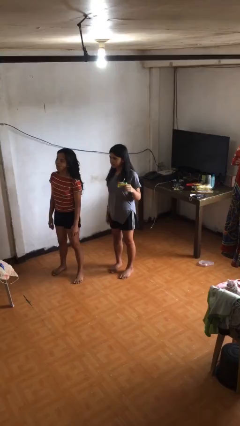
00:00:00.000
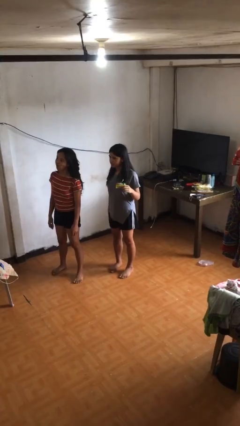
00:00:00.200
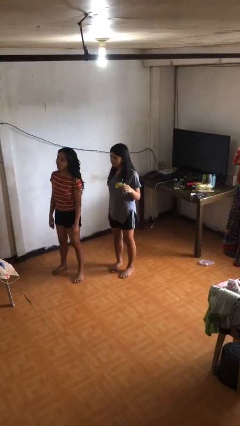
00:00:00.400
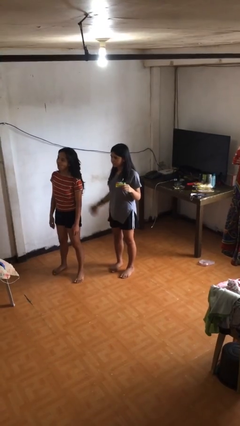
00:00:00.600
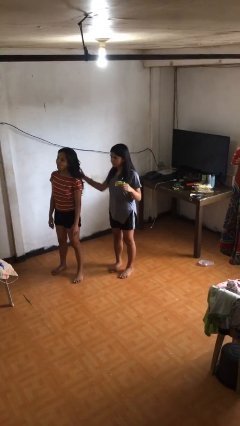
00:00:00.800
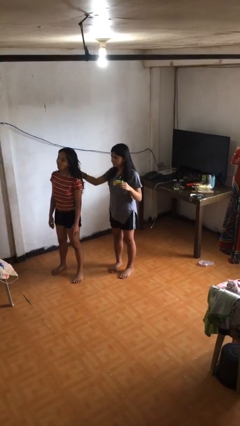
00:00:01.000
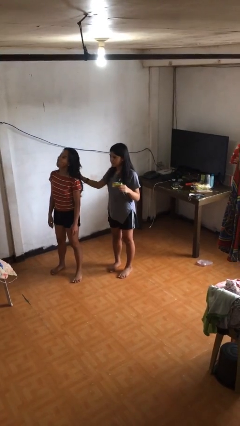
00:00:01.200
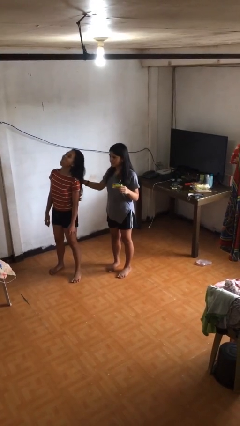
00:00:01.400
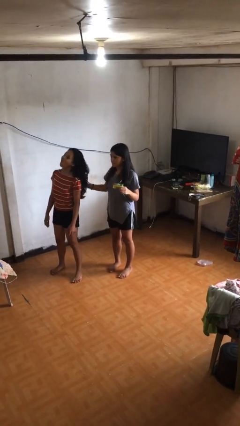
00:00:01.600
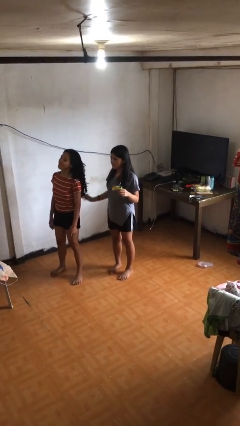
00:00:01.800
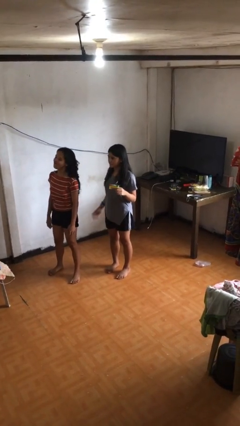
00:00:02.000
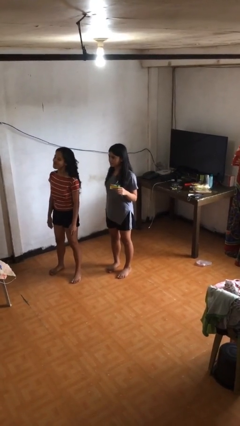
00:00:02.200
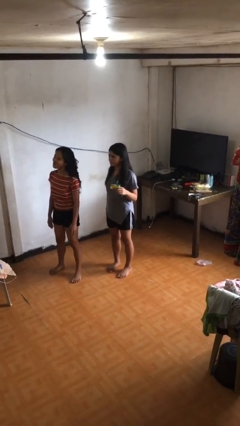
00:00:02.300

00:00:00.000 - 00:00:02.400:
person grabs person by hair

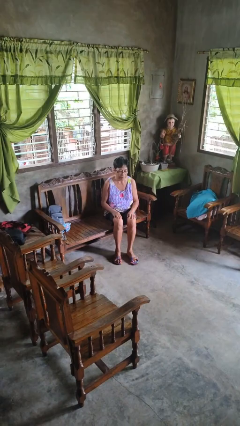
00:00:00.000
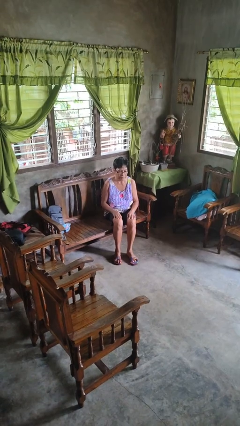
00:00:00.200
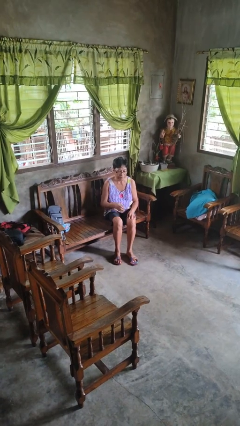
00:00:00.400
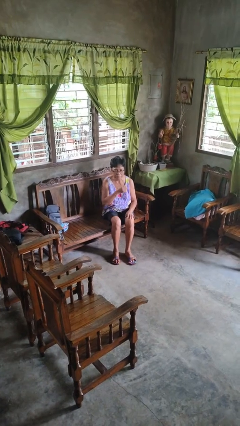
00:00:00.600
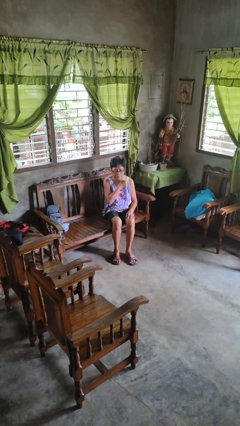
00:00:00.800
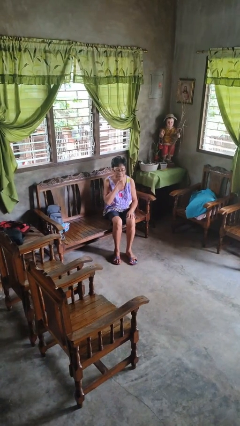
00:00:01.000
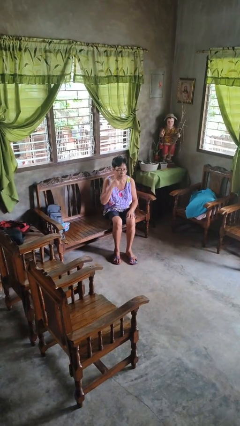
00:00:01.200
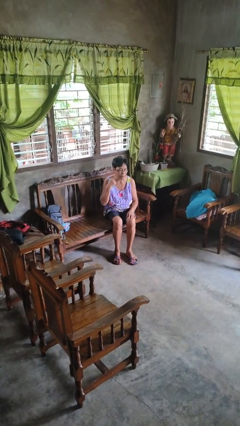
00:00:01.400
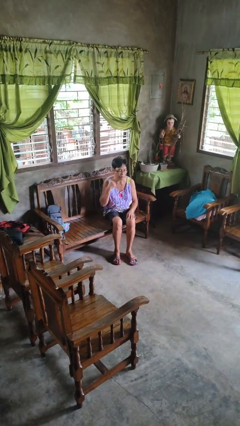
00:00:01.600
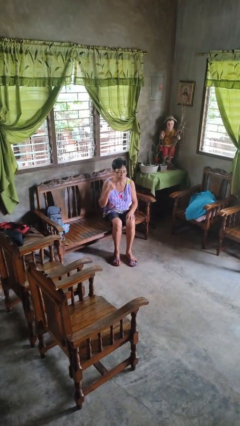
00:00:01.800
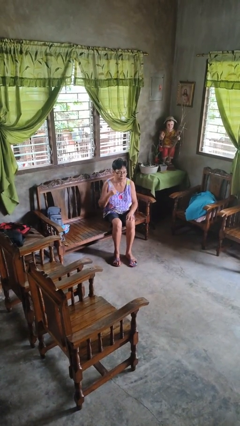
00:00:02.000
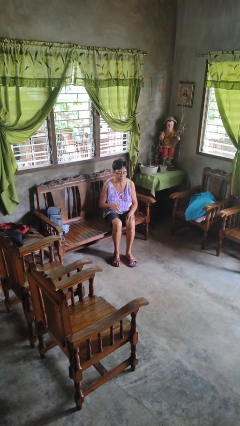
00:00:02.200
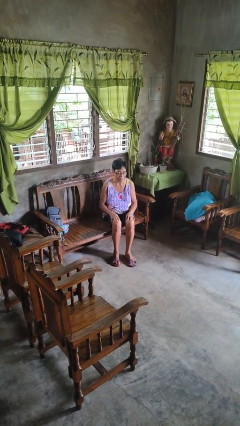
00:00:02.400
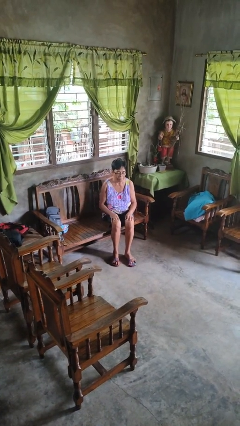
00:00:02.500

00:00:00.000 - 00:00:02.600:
person gestures cut

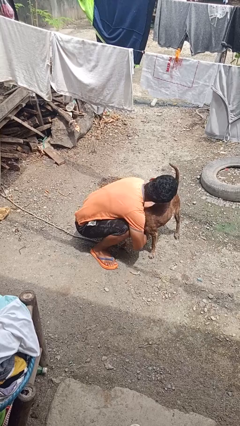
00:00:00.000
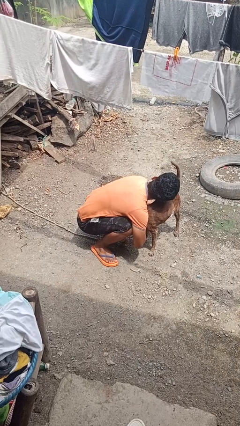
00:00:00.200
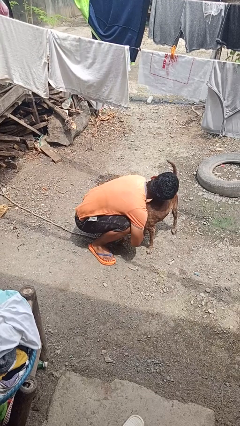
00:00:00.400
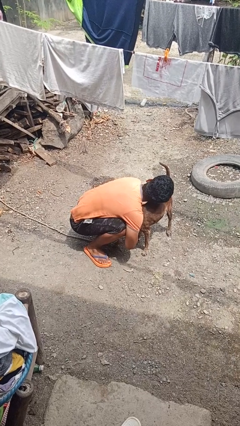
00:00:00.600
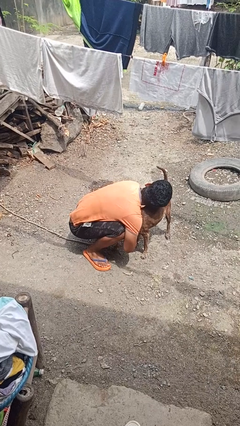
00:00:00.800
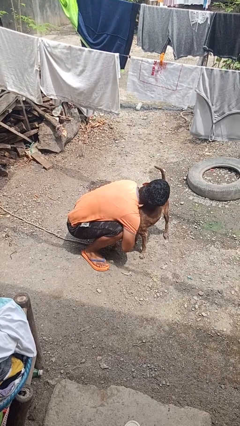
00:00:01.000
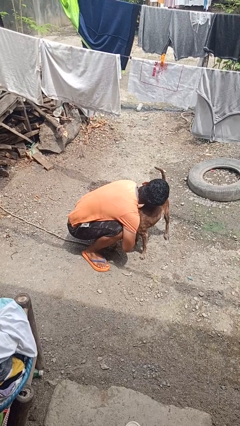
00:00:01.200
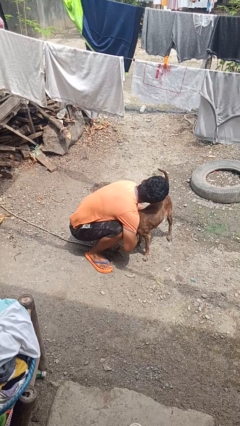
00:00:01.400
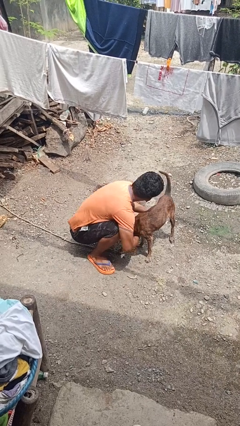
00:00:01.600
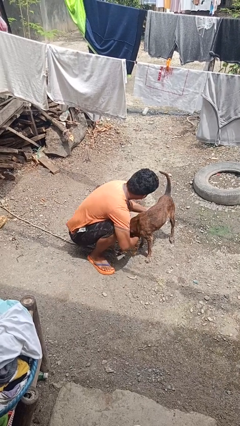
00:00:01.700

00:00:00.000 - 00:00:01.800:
person hugs dog

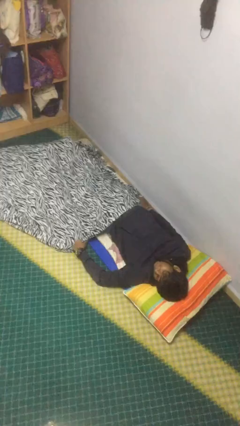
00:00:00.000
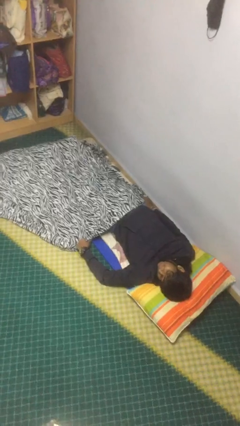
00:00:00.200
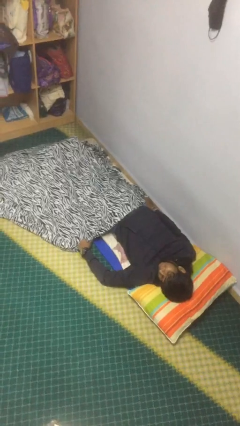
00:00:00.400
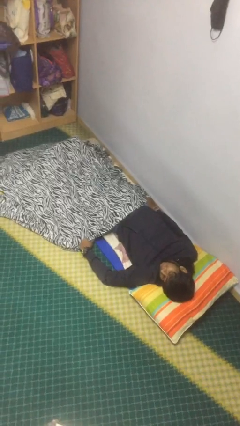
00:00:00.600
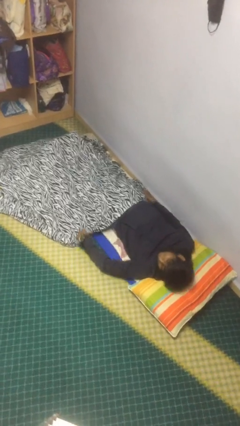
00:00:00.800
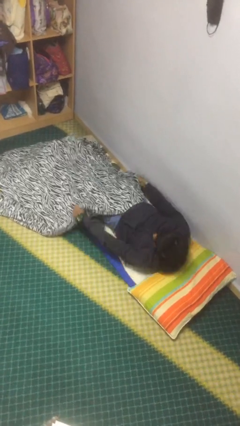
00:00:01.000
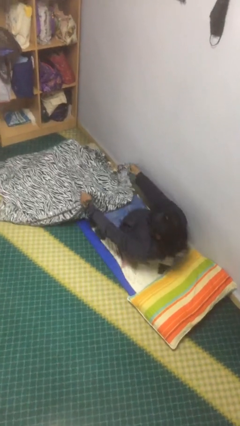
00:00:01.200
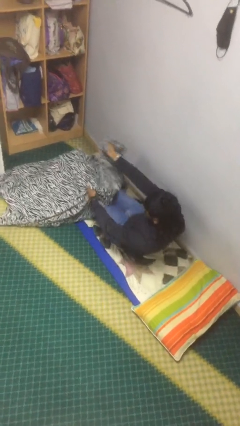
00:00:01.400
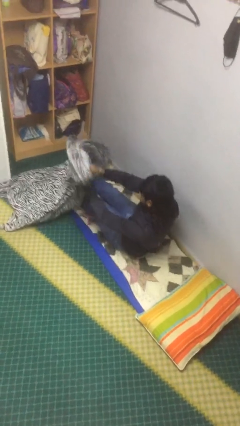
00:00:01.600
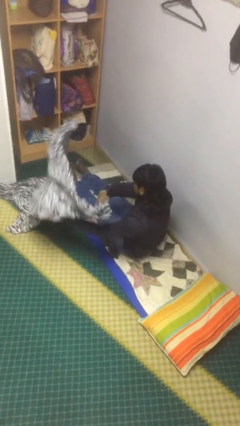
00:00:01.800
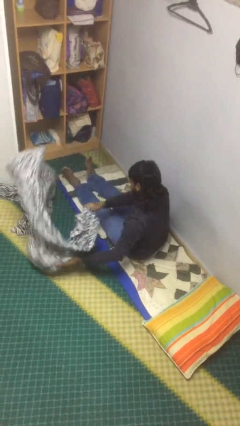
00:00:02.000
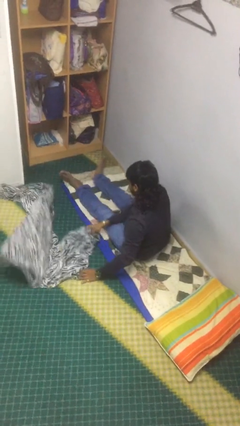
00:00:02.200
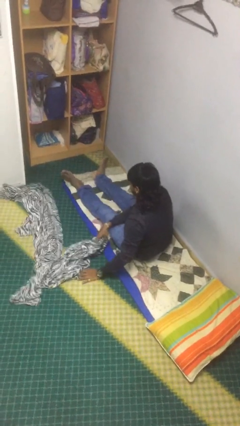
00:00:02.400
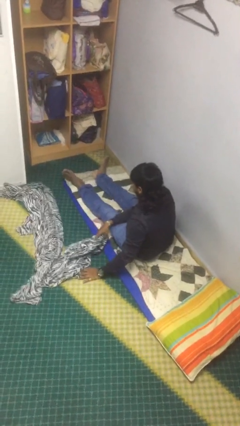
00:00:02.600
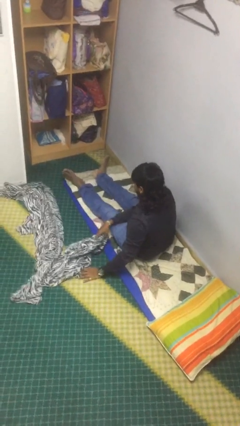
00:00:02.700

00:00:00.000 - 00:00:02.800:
person uncovers with blanket

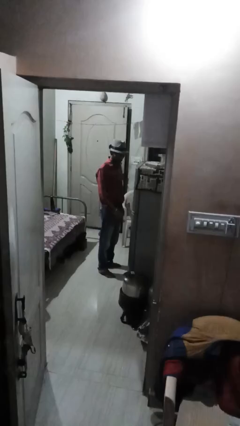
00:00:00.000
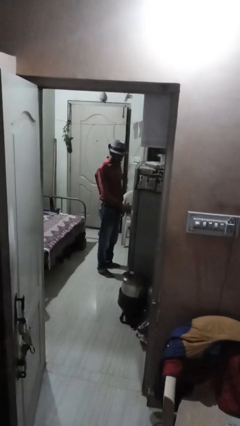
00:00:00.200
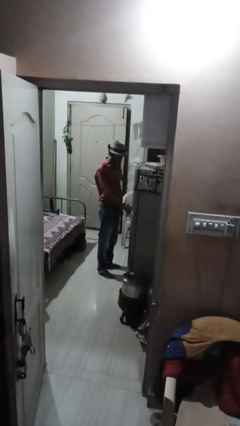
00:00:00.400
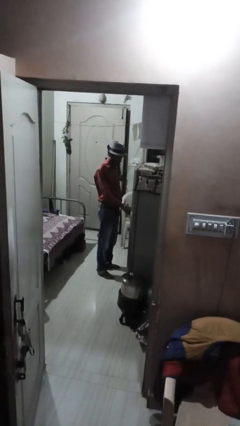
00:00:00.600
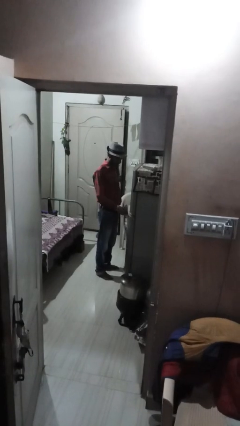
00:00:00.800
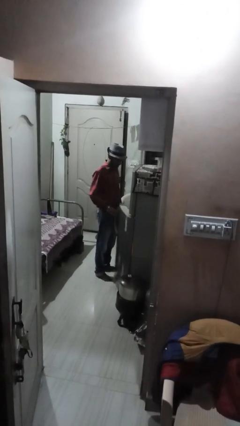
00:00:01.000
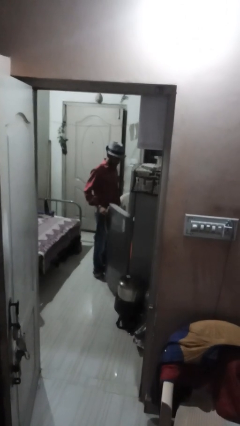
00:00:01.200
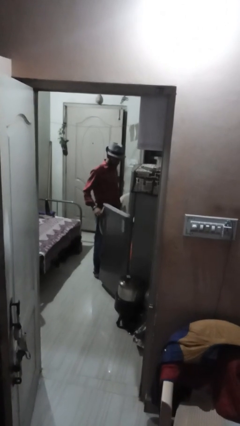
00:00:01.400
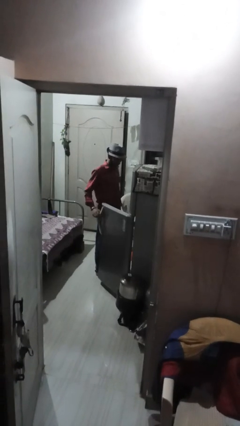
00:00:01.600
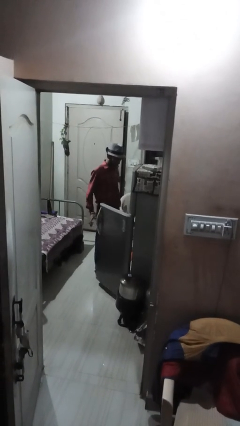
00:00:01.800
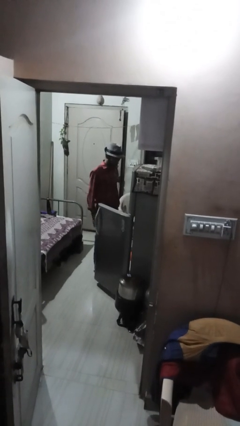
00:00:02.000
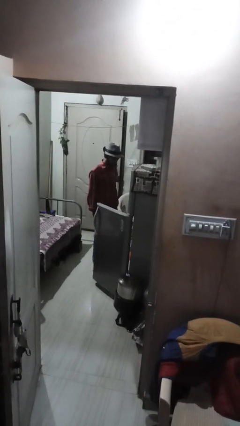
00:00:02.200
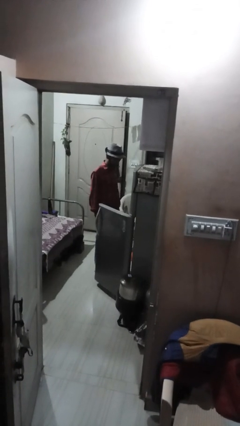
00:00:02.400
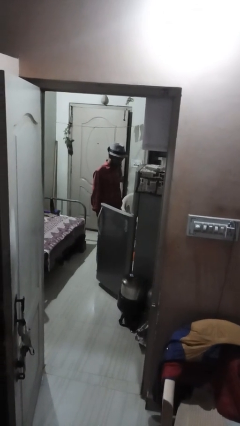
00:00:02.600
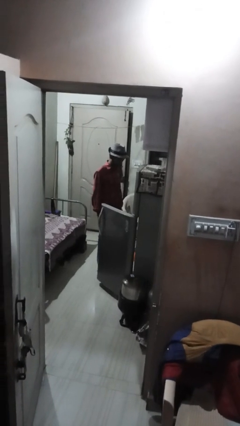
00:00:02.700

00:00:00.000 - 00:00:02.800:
person opens refrigerator

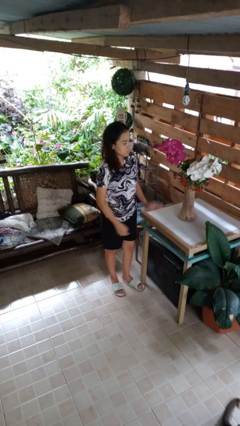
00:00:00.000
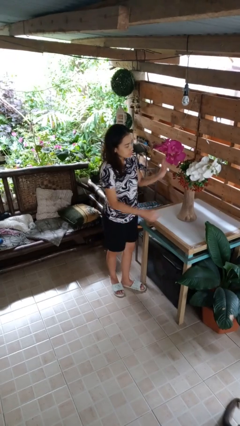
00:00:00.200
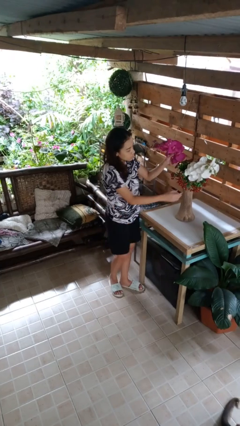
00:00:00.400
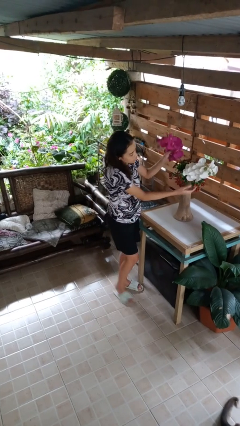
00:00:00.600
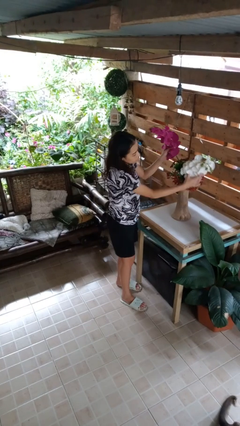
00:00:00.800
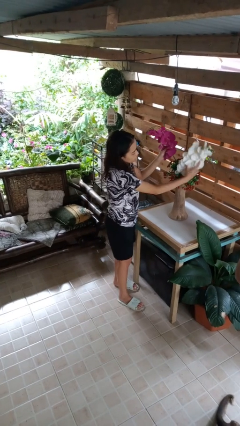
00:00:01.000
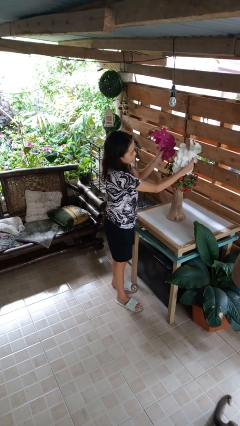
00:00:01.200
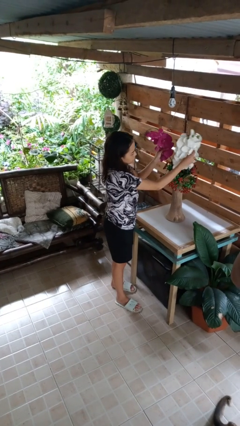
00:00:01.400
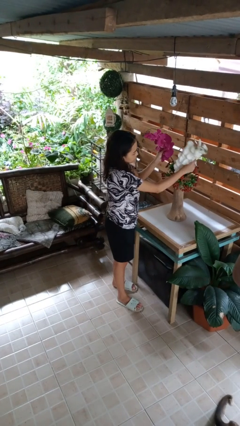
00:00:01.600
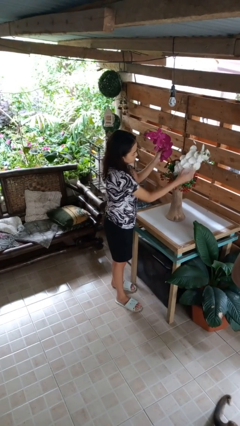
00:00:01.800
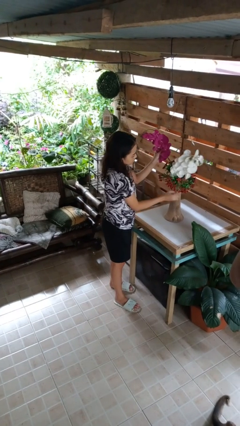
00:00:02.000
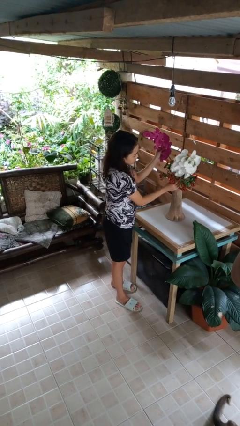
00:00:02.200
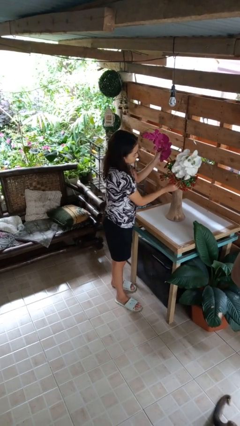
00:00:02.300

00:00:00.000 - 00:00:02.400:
person arranges flowers in vase

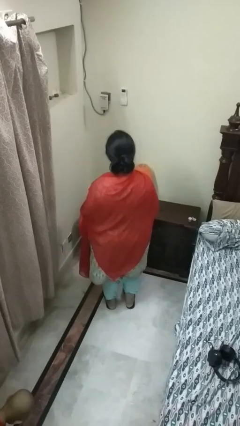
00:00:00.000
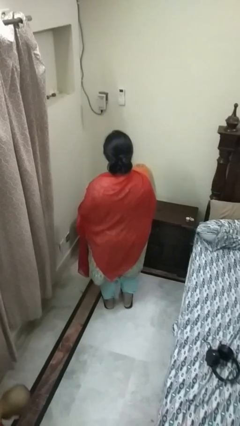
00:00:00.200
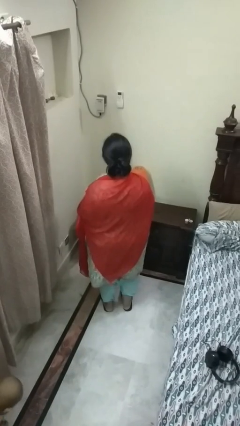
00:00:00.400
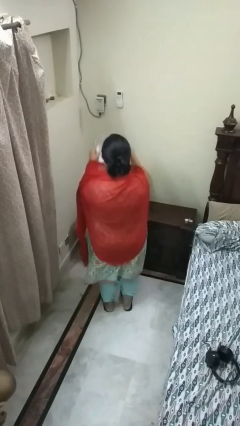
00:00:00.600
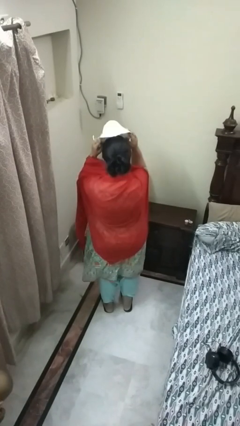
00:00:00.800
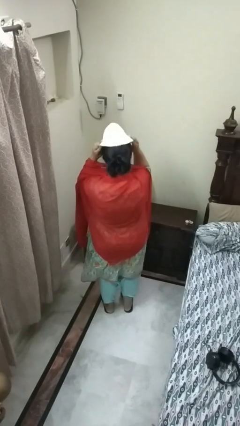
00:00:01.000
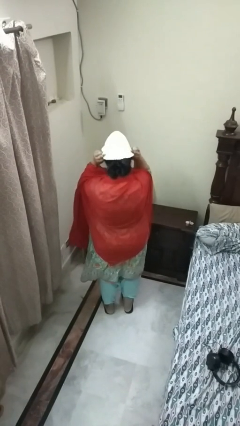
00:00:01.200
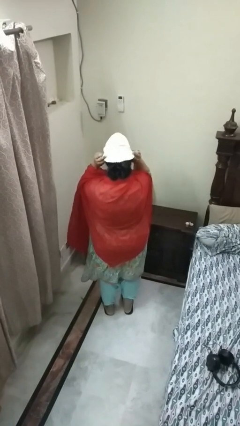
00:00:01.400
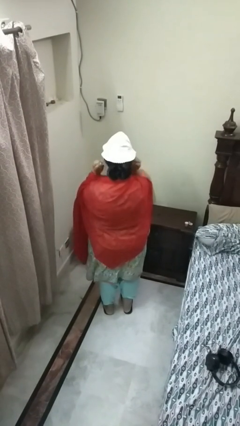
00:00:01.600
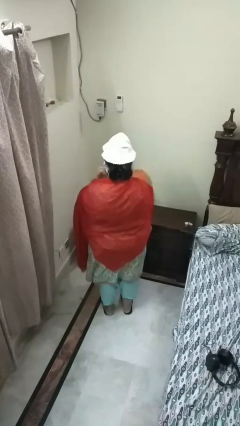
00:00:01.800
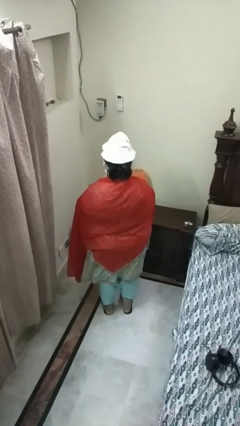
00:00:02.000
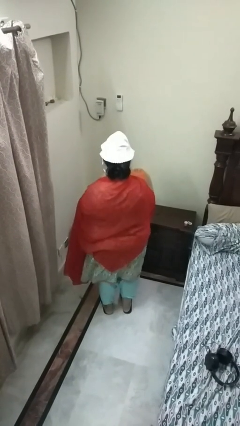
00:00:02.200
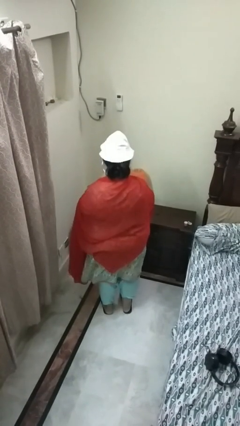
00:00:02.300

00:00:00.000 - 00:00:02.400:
person puts on hat
